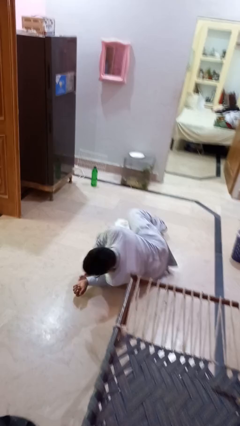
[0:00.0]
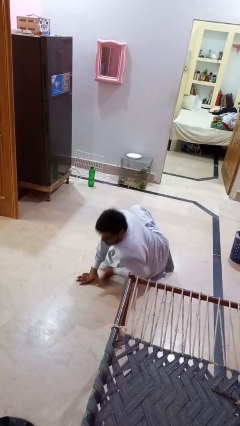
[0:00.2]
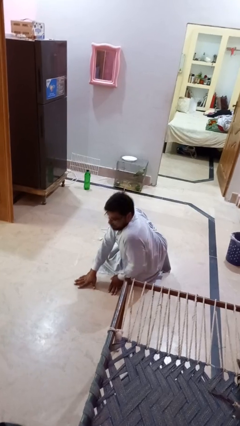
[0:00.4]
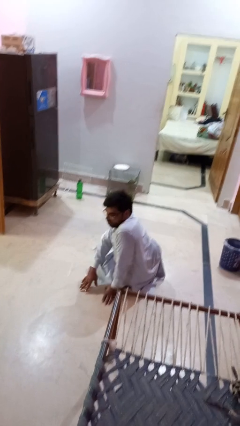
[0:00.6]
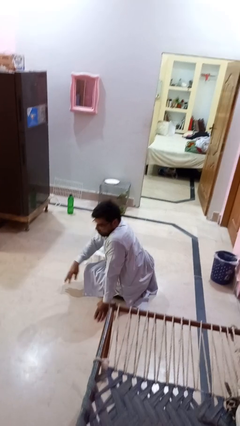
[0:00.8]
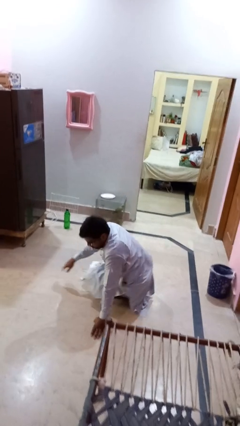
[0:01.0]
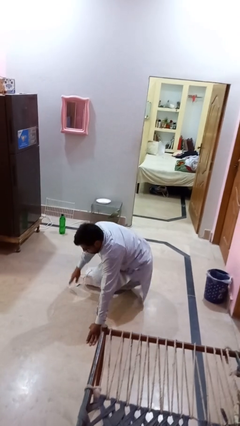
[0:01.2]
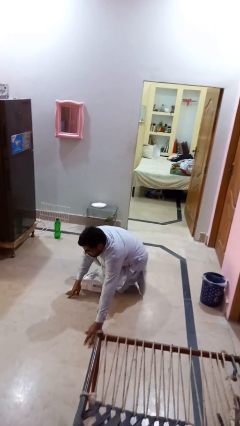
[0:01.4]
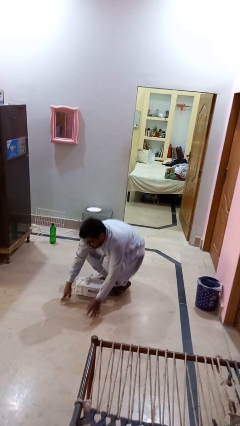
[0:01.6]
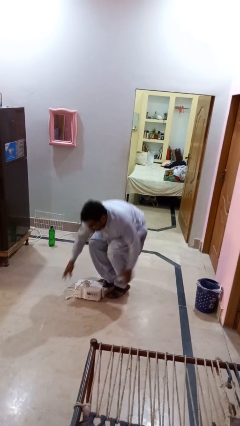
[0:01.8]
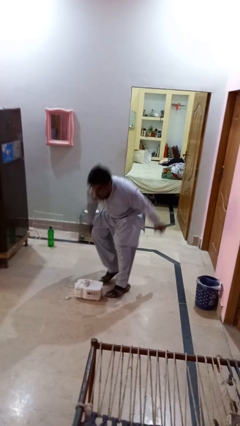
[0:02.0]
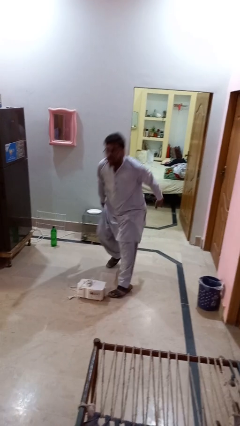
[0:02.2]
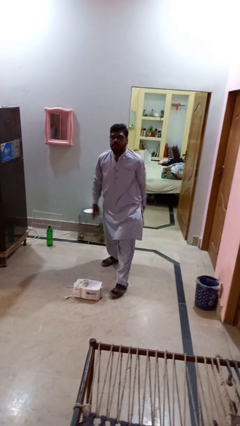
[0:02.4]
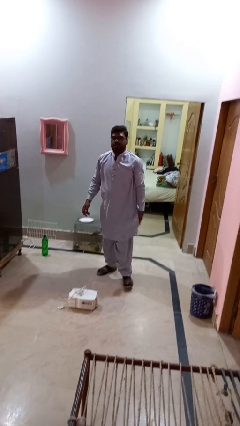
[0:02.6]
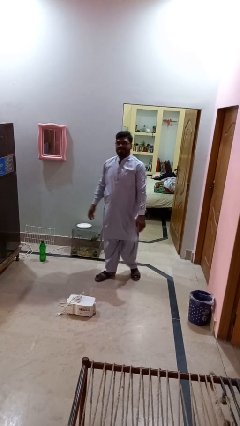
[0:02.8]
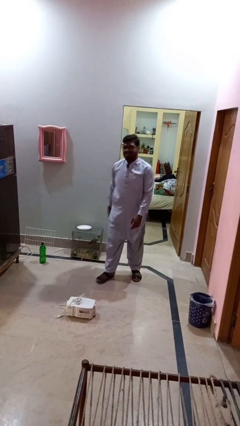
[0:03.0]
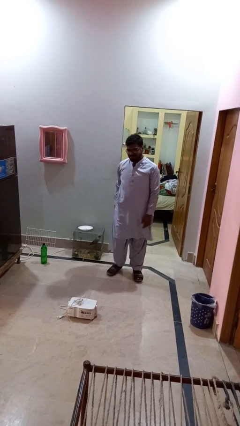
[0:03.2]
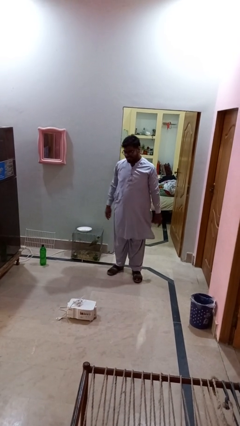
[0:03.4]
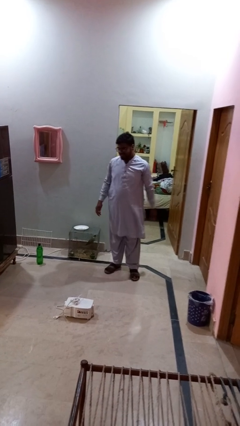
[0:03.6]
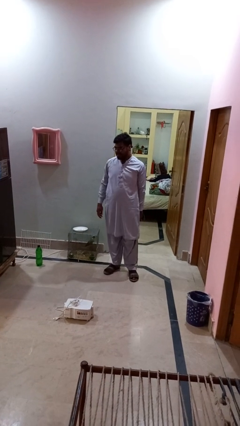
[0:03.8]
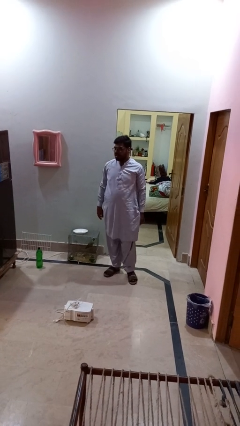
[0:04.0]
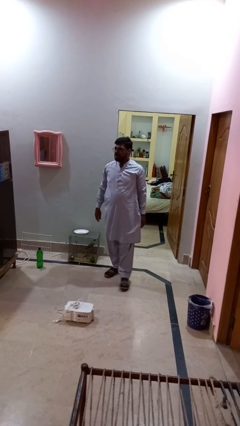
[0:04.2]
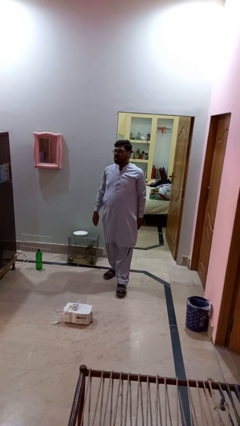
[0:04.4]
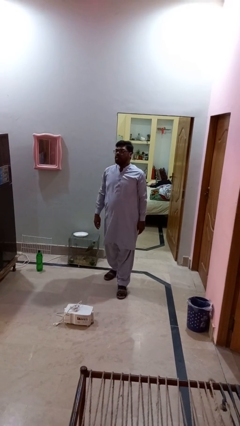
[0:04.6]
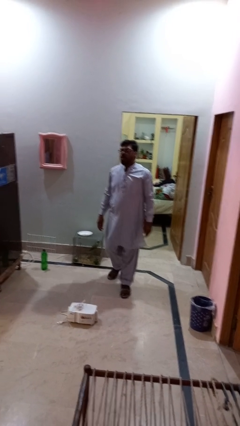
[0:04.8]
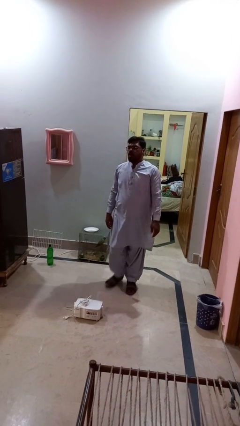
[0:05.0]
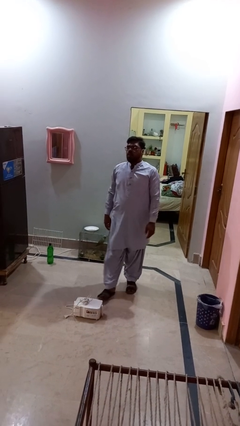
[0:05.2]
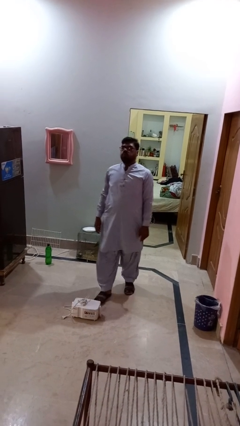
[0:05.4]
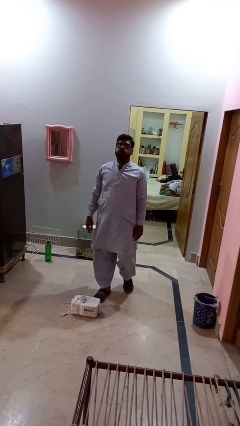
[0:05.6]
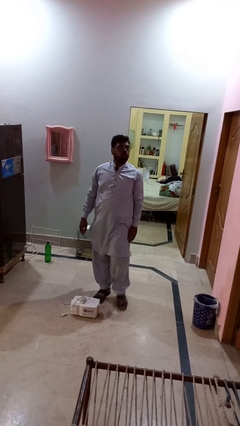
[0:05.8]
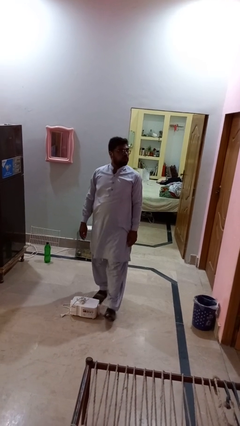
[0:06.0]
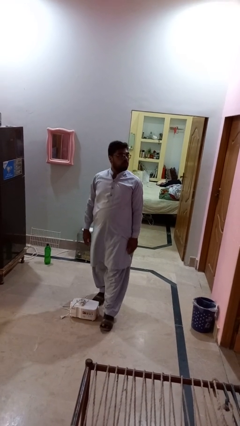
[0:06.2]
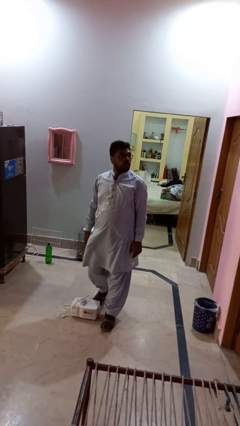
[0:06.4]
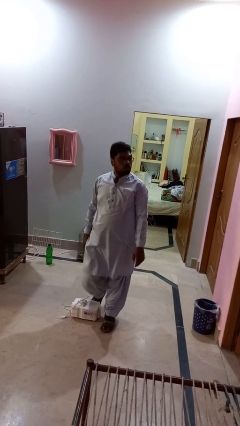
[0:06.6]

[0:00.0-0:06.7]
person stands up from floor

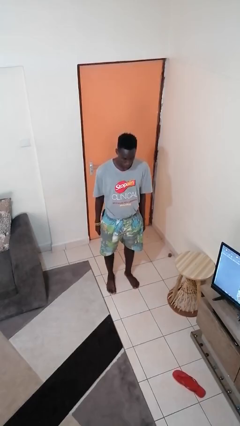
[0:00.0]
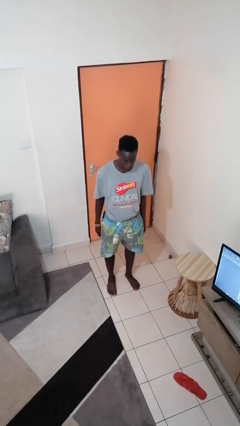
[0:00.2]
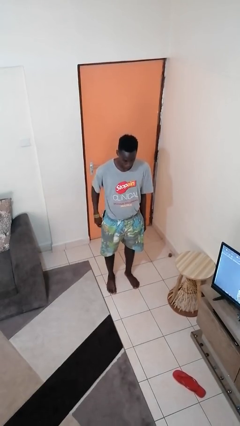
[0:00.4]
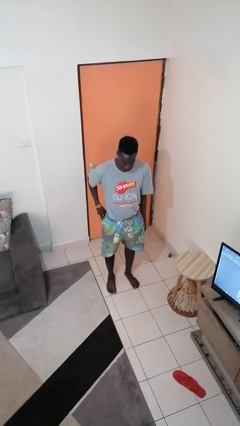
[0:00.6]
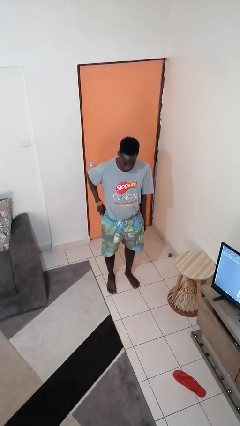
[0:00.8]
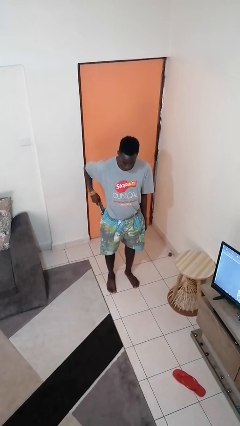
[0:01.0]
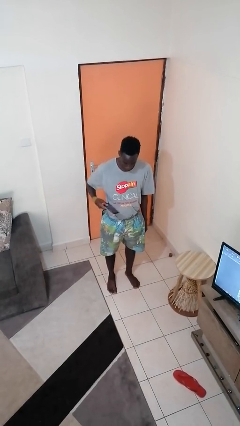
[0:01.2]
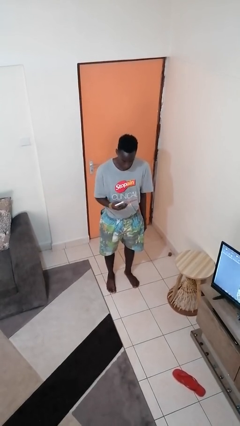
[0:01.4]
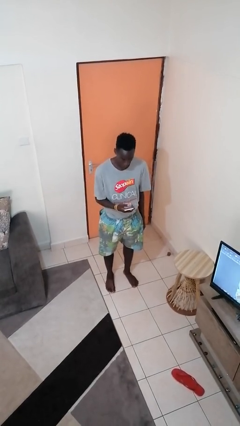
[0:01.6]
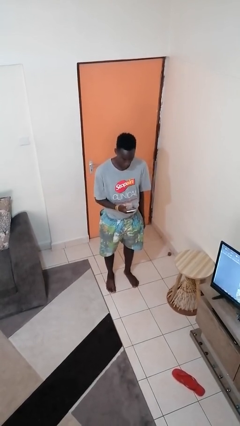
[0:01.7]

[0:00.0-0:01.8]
person takes phone from pocket

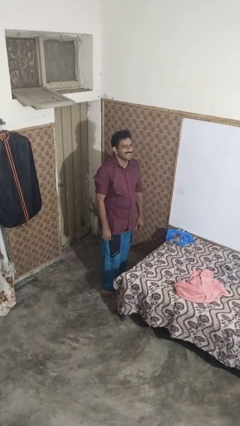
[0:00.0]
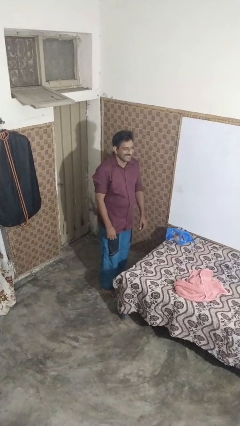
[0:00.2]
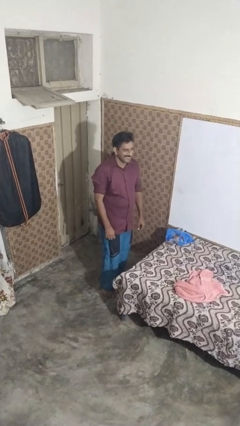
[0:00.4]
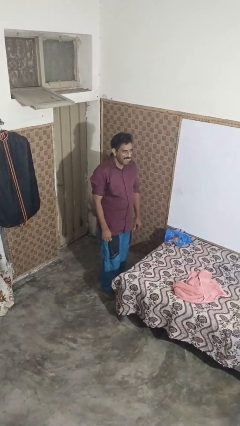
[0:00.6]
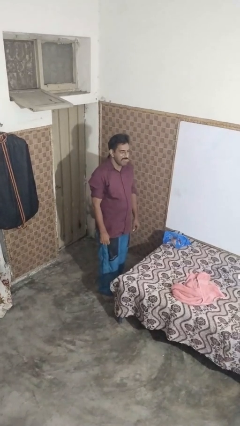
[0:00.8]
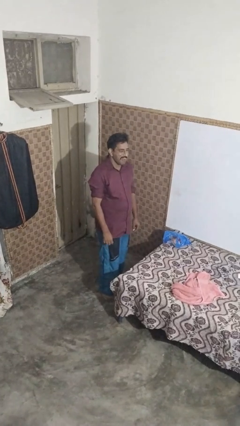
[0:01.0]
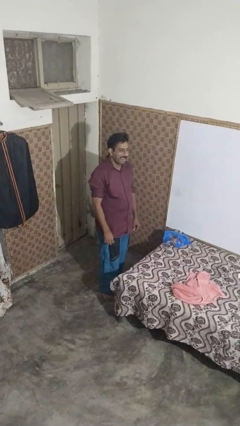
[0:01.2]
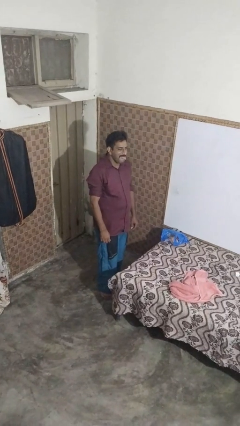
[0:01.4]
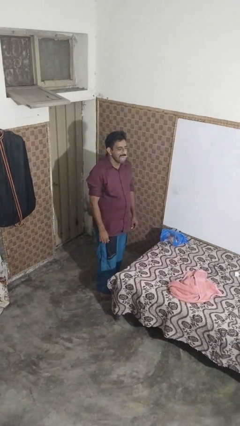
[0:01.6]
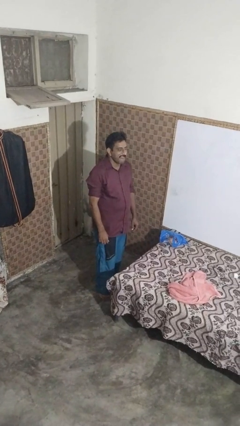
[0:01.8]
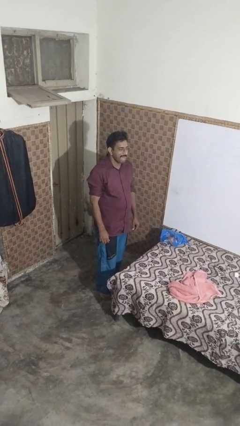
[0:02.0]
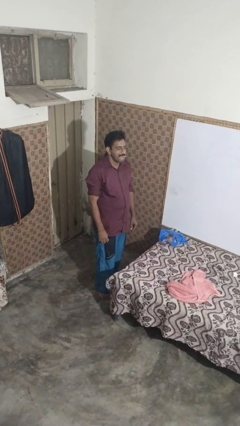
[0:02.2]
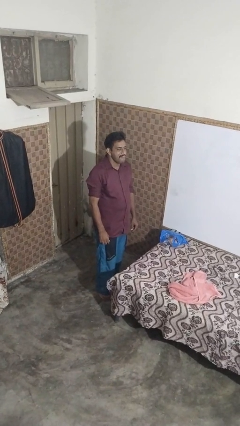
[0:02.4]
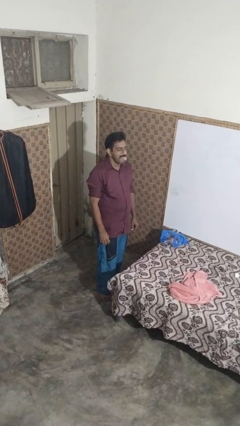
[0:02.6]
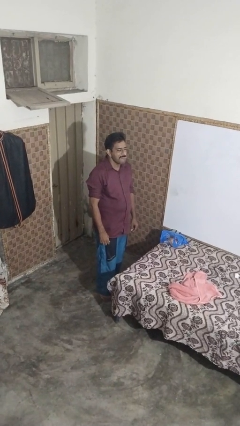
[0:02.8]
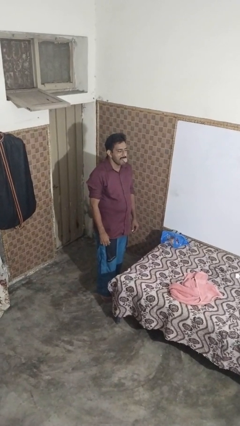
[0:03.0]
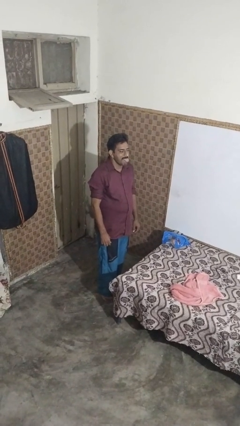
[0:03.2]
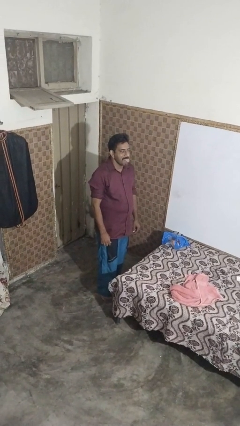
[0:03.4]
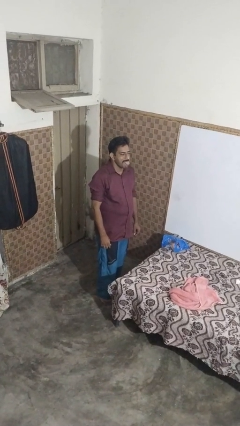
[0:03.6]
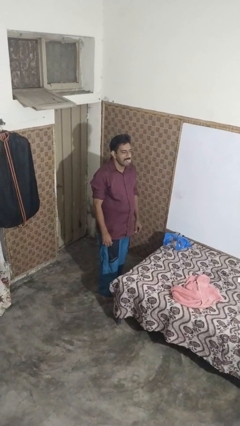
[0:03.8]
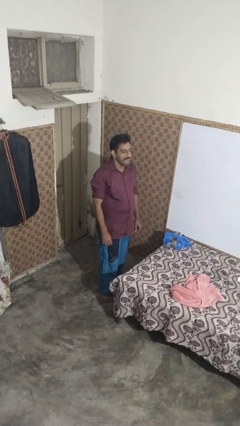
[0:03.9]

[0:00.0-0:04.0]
person sticks out tongue

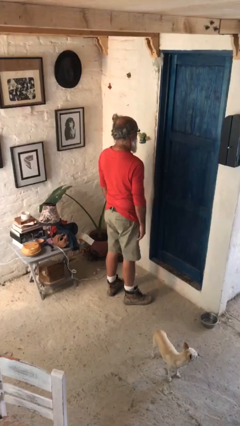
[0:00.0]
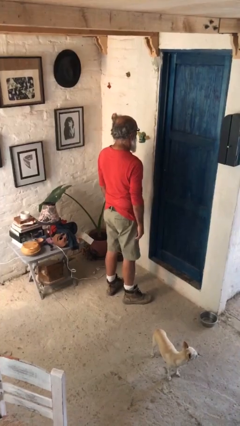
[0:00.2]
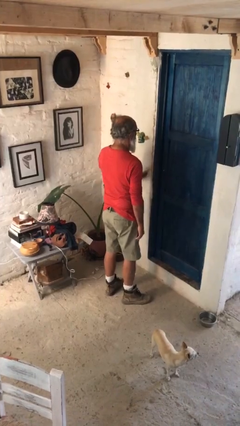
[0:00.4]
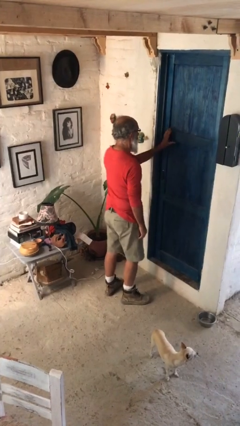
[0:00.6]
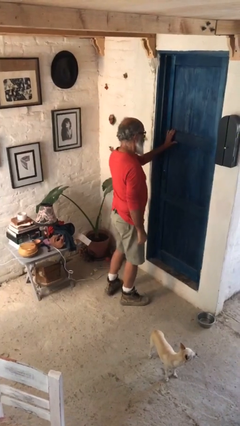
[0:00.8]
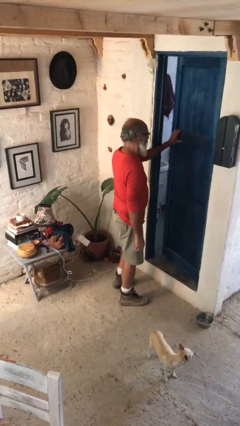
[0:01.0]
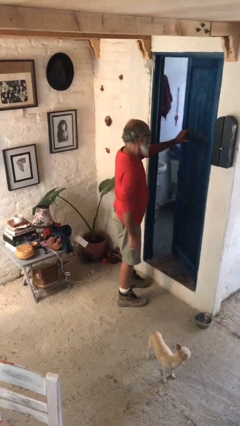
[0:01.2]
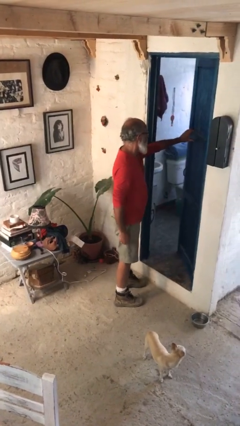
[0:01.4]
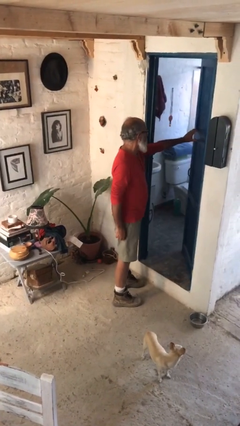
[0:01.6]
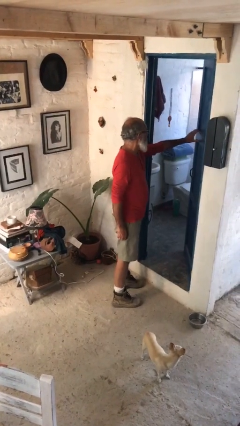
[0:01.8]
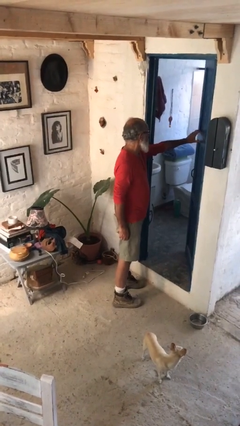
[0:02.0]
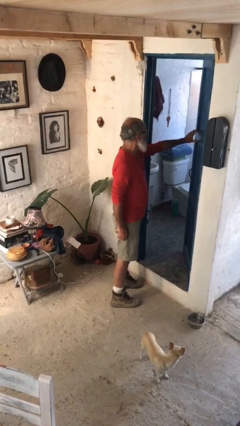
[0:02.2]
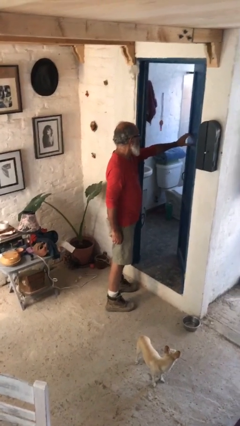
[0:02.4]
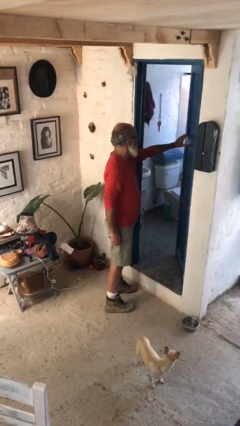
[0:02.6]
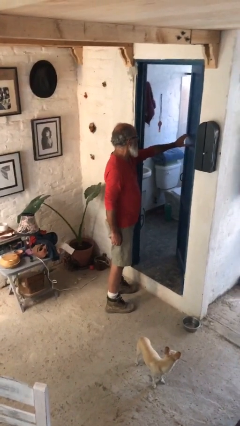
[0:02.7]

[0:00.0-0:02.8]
person opens facility door

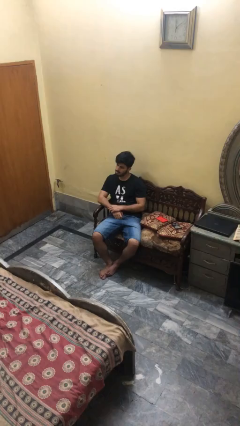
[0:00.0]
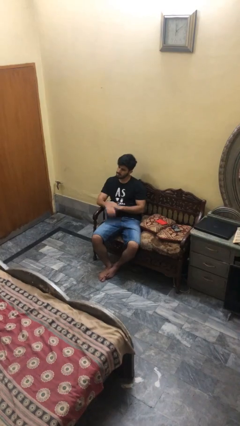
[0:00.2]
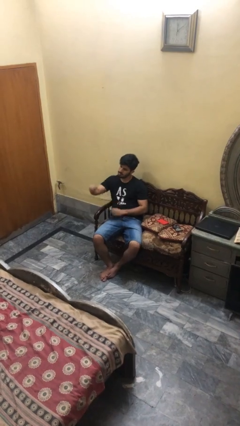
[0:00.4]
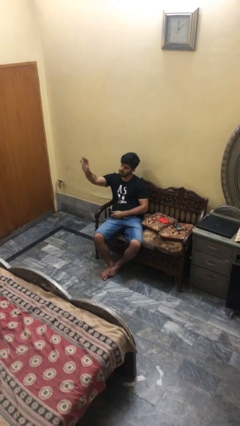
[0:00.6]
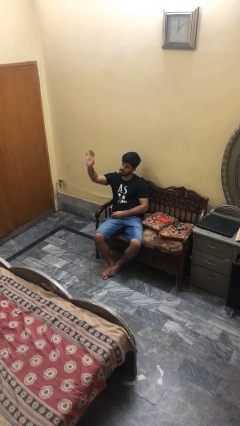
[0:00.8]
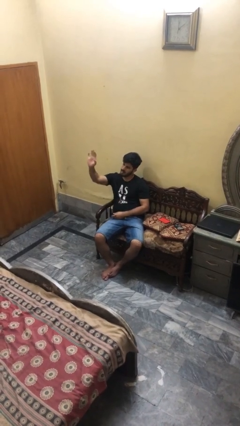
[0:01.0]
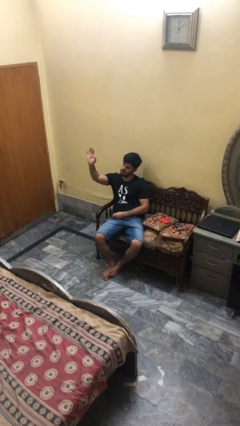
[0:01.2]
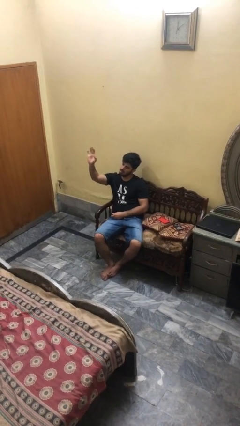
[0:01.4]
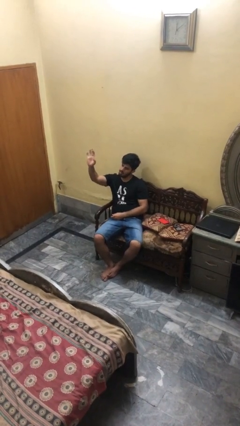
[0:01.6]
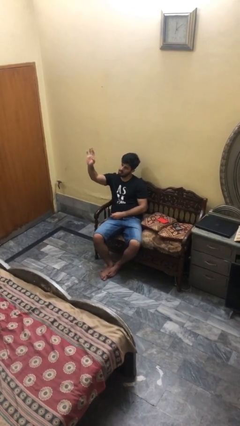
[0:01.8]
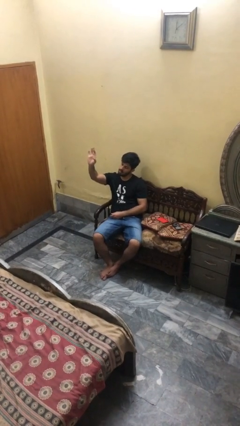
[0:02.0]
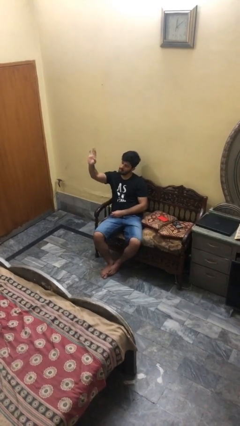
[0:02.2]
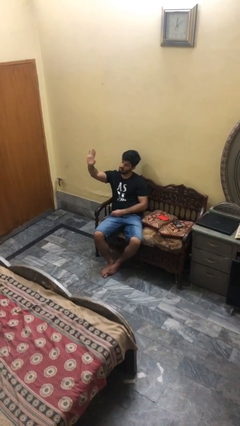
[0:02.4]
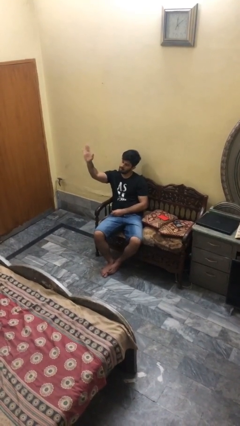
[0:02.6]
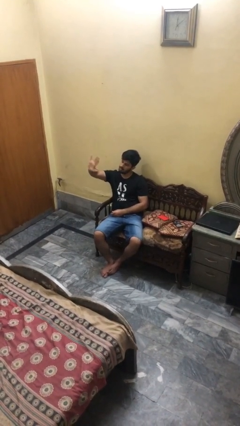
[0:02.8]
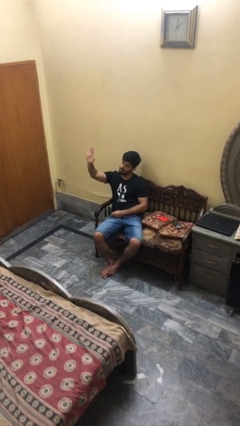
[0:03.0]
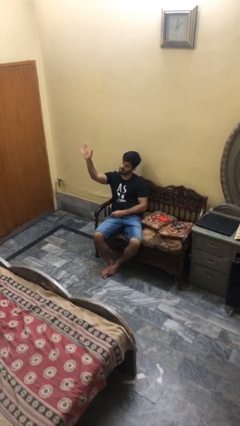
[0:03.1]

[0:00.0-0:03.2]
person waves at person
